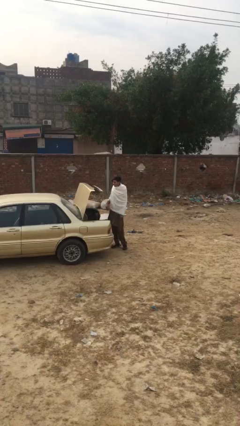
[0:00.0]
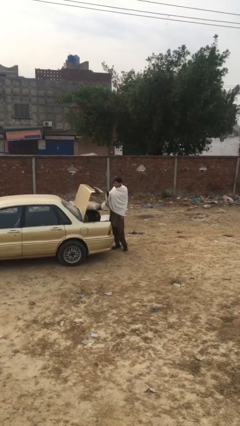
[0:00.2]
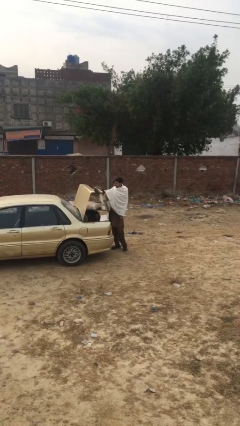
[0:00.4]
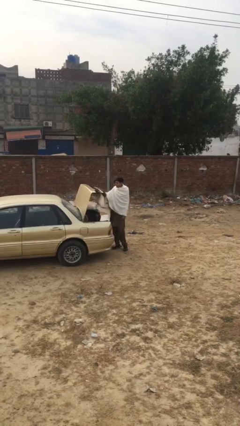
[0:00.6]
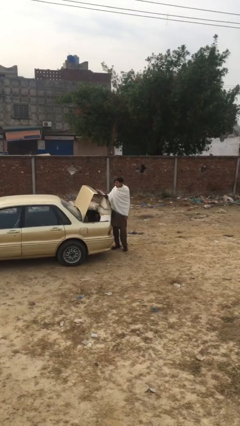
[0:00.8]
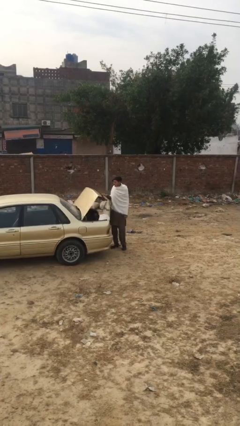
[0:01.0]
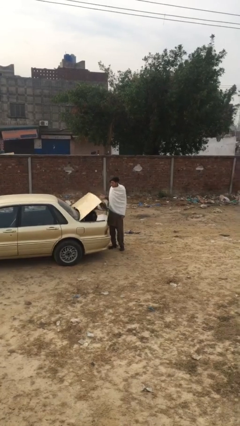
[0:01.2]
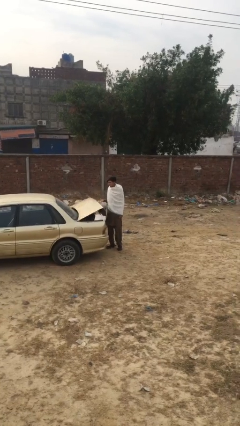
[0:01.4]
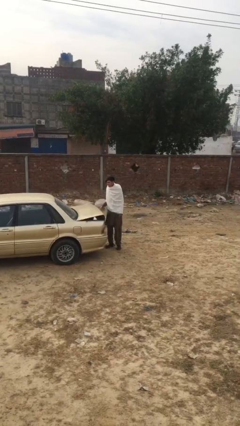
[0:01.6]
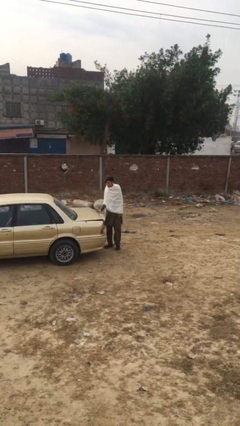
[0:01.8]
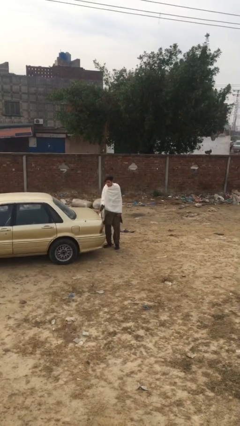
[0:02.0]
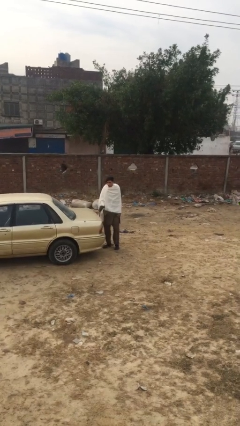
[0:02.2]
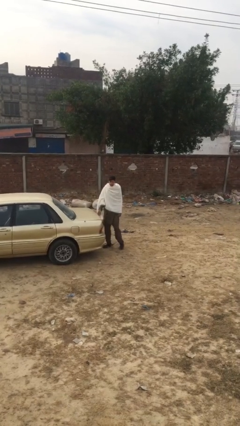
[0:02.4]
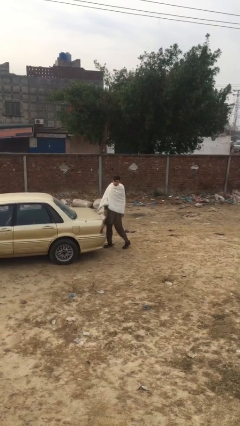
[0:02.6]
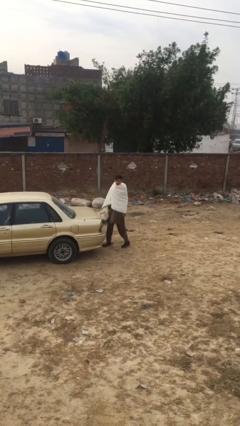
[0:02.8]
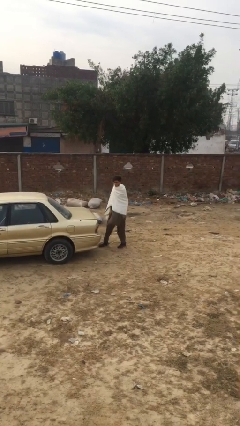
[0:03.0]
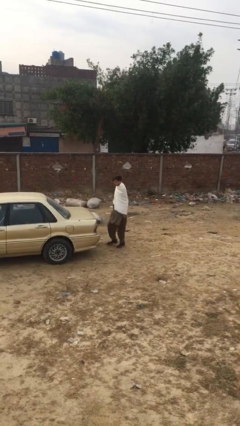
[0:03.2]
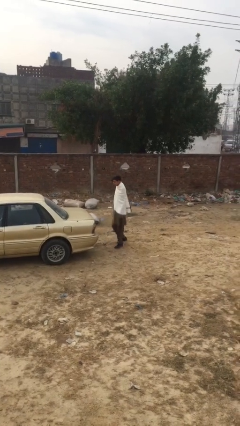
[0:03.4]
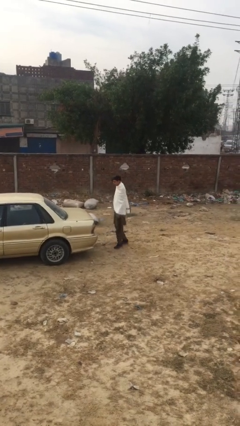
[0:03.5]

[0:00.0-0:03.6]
person closes car trunk

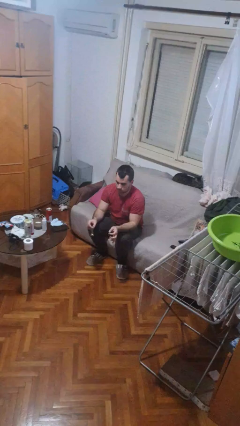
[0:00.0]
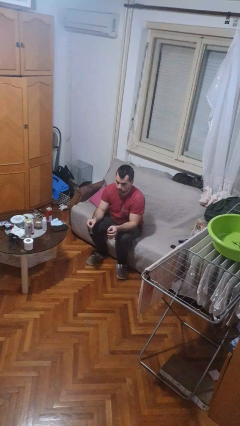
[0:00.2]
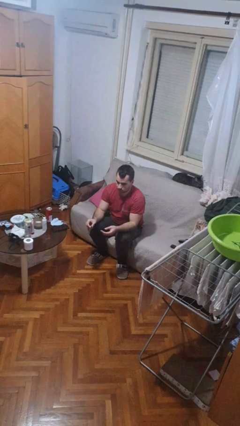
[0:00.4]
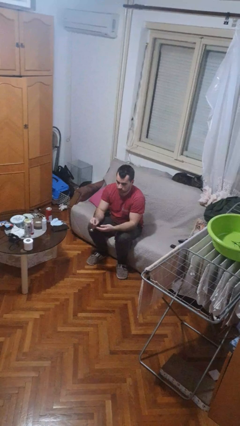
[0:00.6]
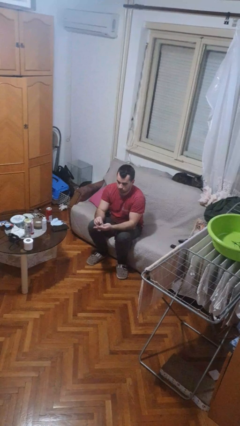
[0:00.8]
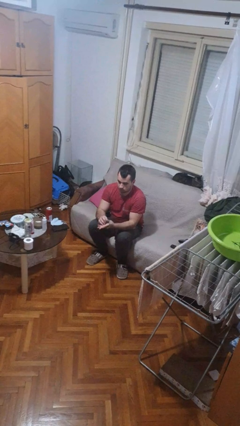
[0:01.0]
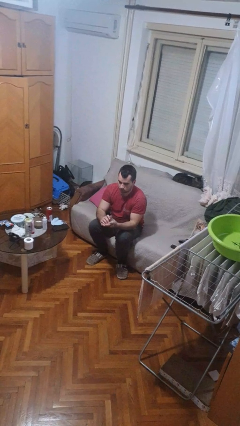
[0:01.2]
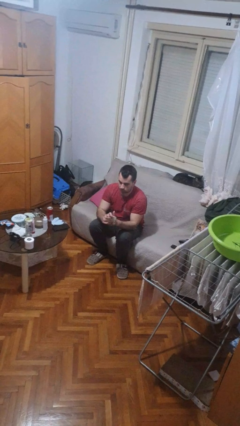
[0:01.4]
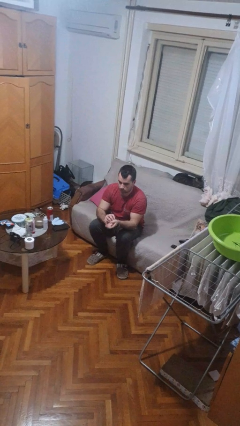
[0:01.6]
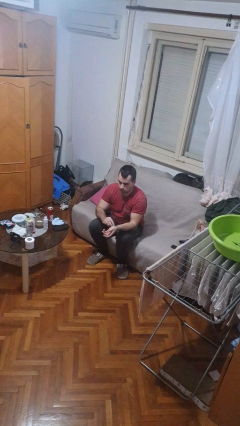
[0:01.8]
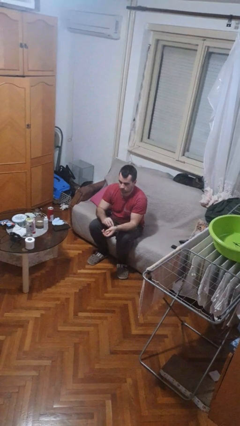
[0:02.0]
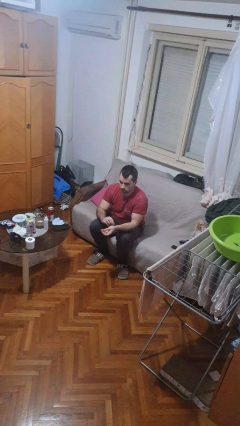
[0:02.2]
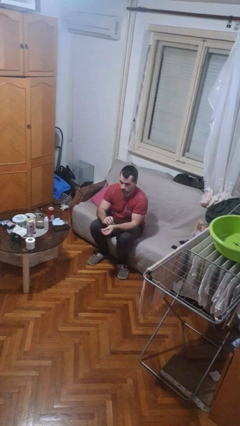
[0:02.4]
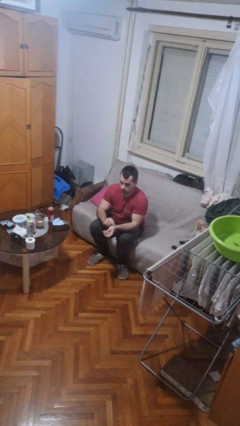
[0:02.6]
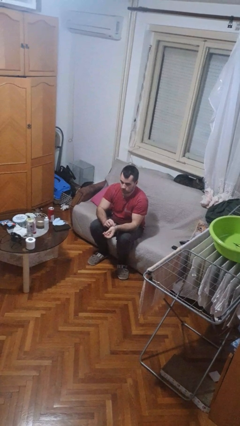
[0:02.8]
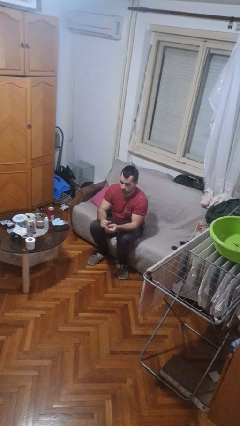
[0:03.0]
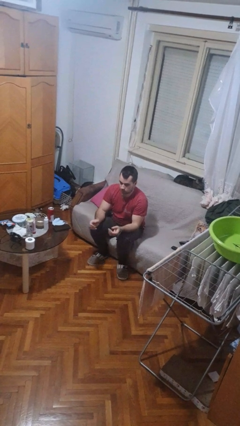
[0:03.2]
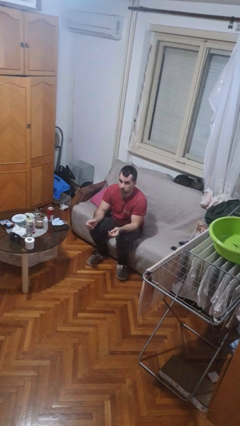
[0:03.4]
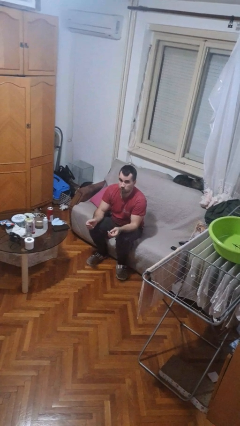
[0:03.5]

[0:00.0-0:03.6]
person puts on wristwatch

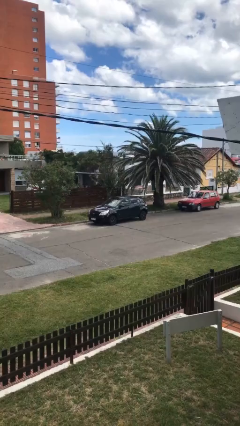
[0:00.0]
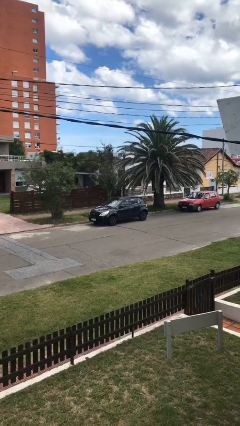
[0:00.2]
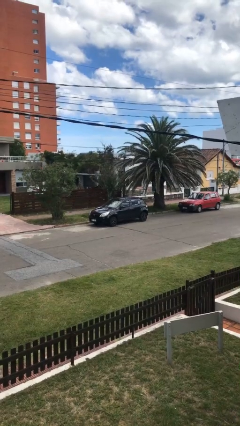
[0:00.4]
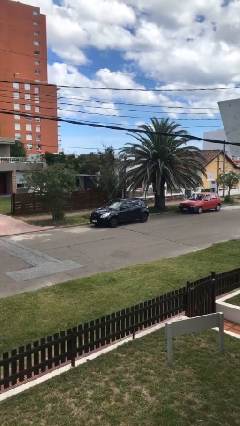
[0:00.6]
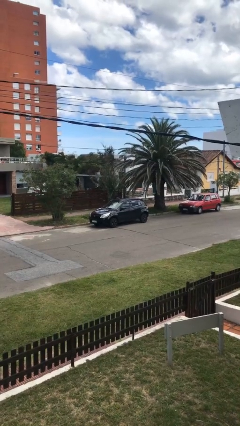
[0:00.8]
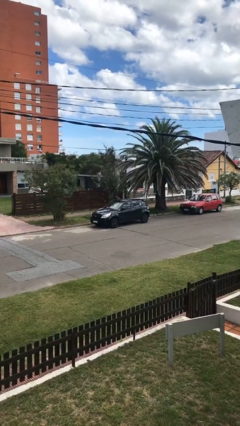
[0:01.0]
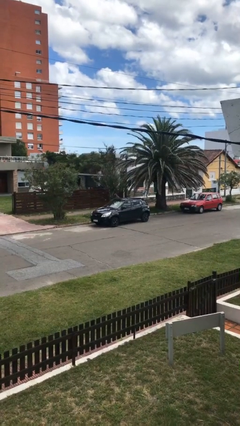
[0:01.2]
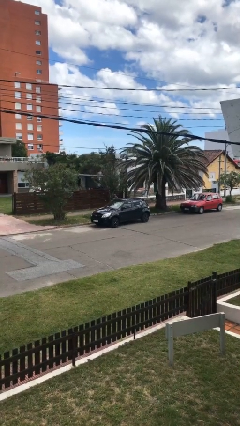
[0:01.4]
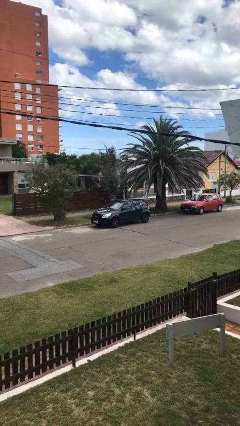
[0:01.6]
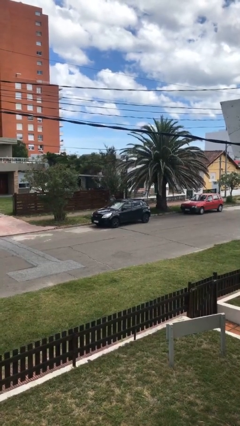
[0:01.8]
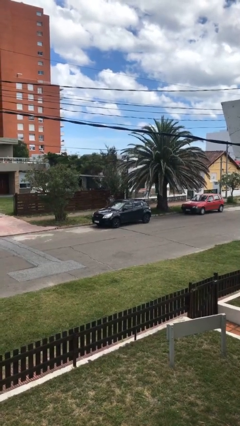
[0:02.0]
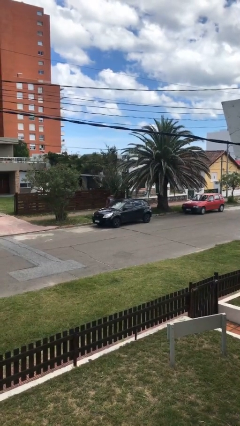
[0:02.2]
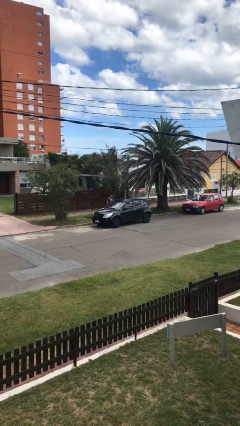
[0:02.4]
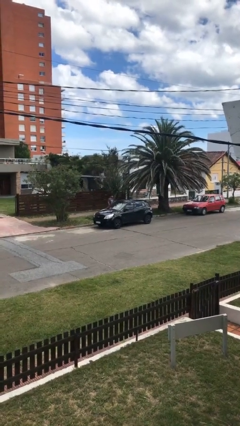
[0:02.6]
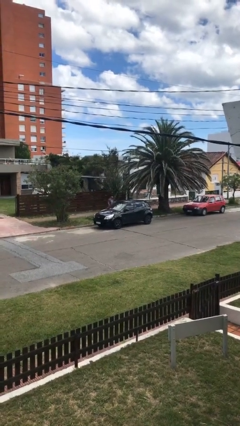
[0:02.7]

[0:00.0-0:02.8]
car drops off person

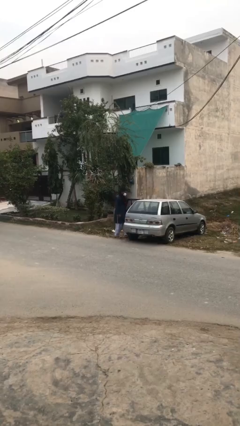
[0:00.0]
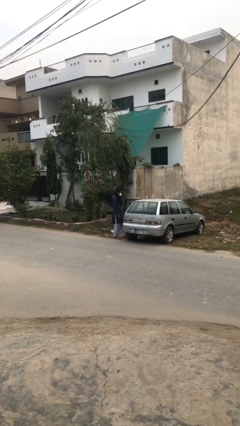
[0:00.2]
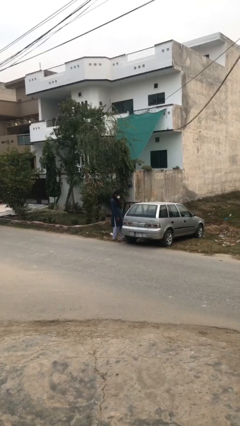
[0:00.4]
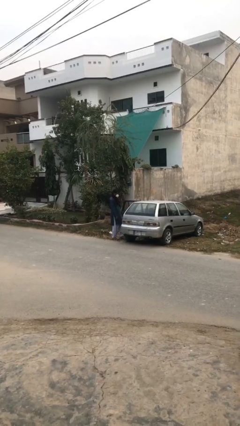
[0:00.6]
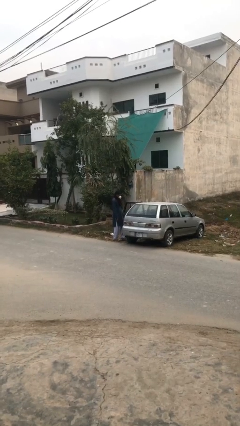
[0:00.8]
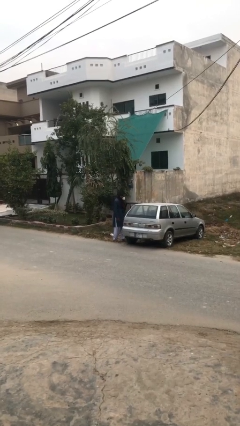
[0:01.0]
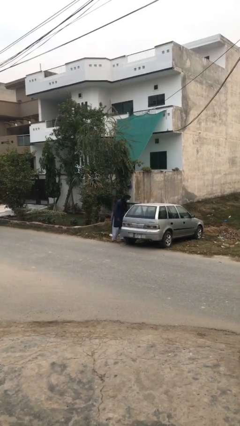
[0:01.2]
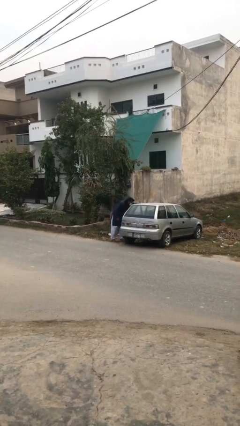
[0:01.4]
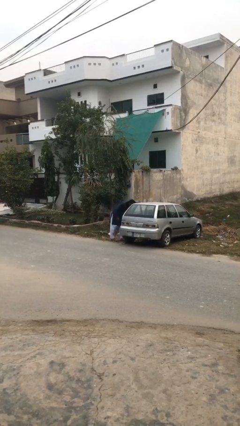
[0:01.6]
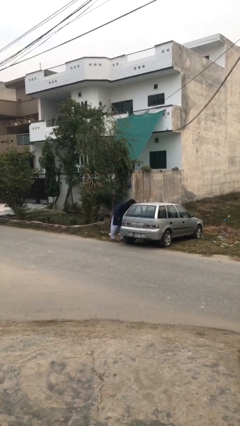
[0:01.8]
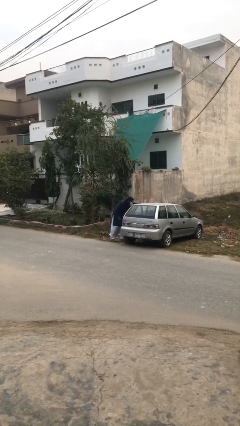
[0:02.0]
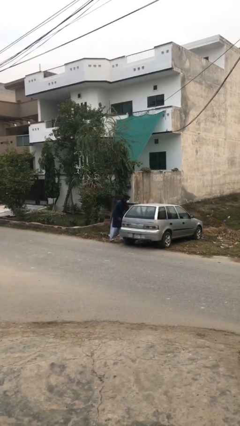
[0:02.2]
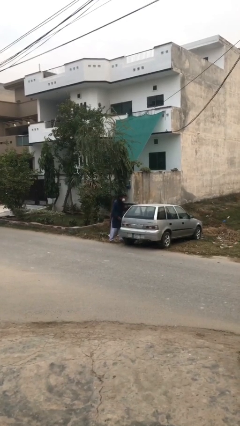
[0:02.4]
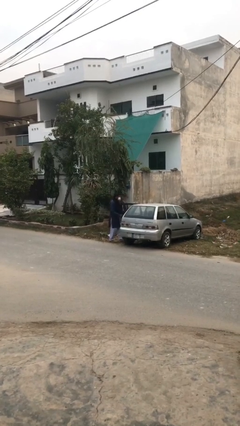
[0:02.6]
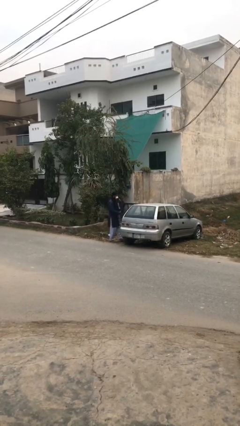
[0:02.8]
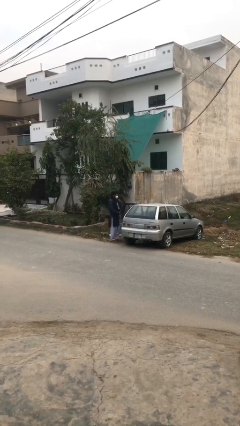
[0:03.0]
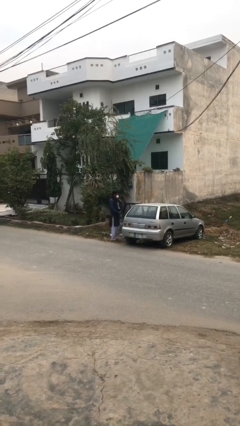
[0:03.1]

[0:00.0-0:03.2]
person unloads car

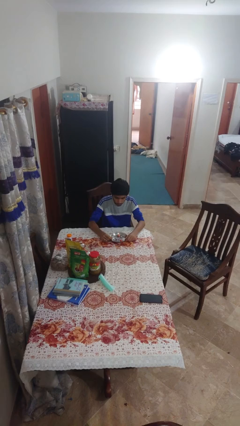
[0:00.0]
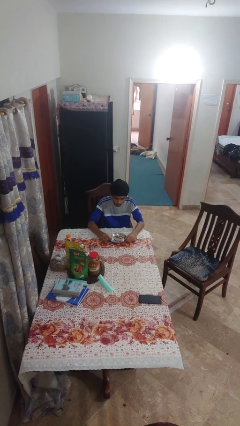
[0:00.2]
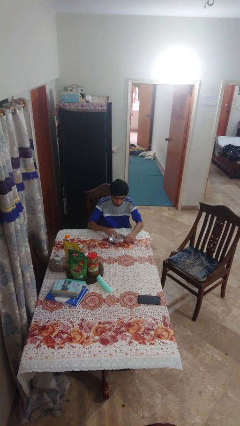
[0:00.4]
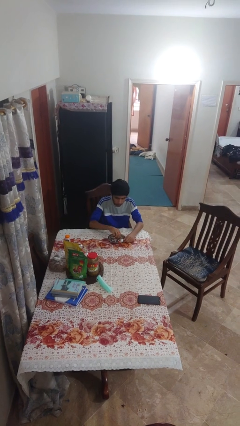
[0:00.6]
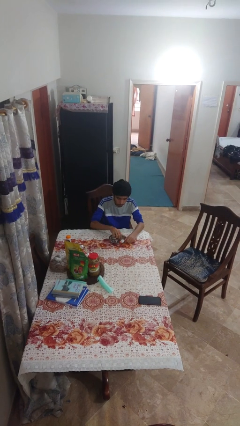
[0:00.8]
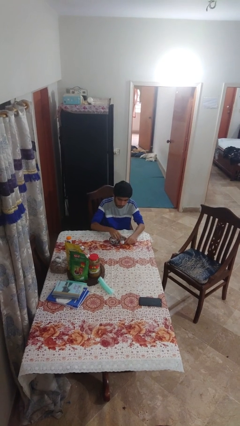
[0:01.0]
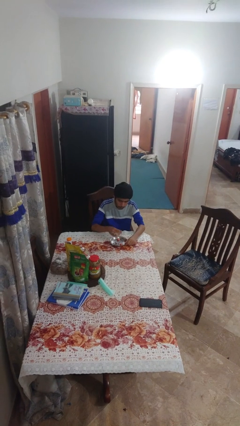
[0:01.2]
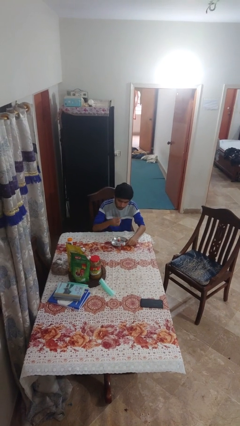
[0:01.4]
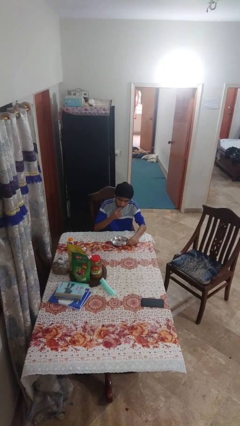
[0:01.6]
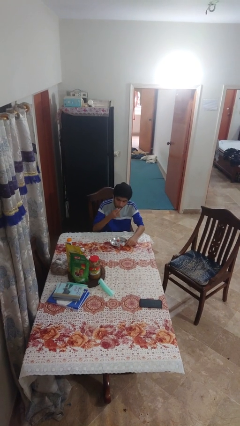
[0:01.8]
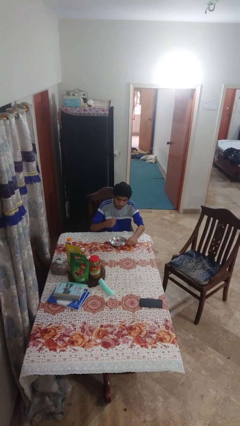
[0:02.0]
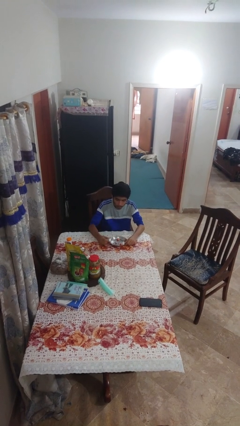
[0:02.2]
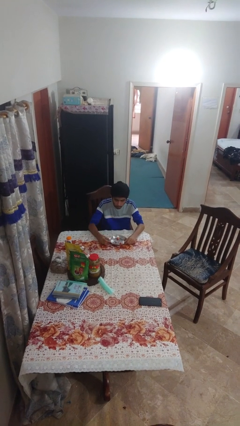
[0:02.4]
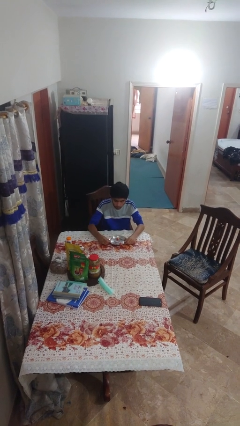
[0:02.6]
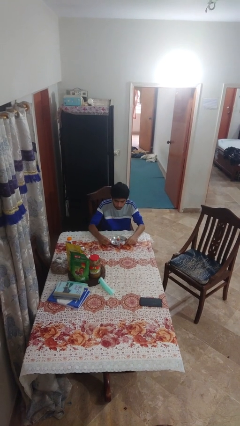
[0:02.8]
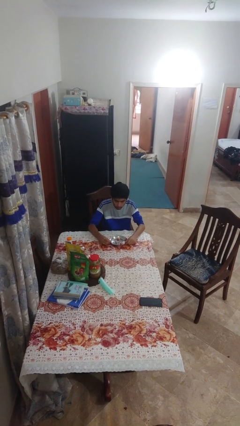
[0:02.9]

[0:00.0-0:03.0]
person eats with hands

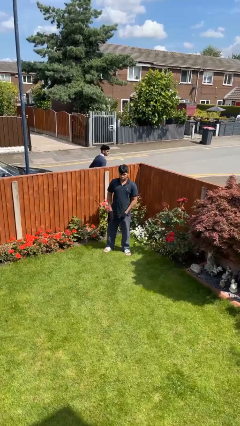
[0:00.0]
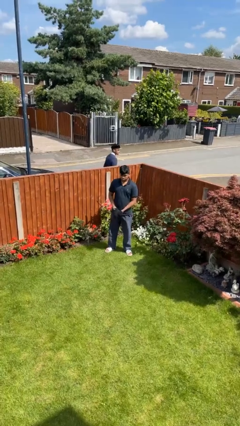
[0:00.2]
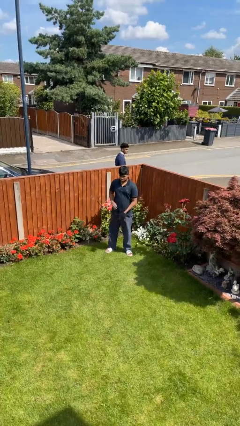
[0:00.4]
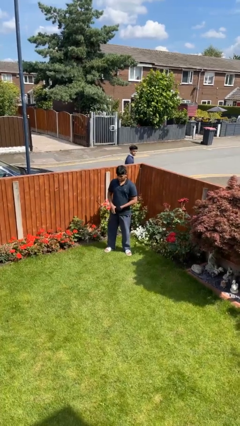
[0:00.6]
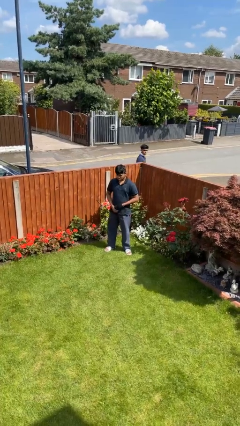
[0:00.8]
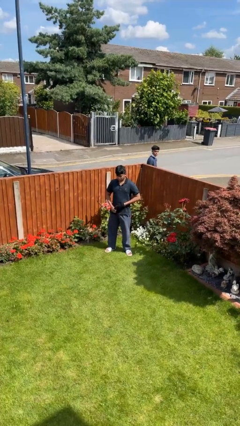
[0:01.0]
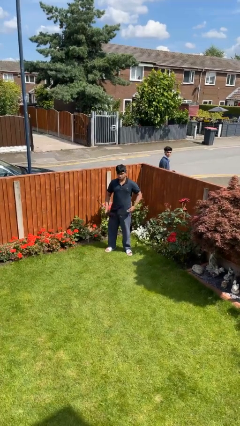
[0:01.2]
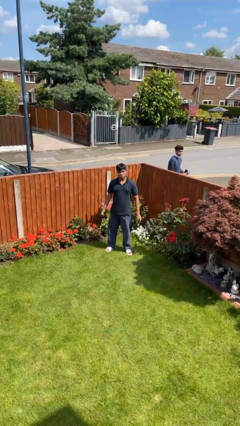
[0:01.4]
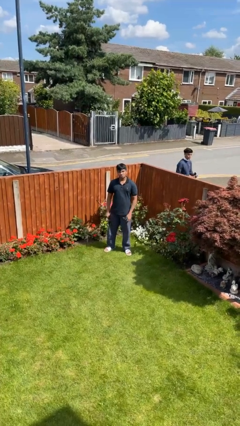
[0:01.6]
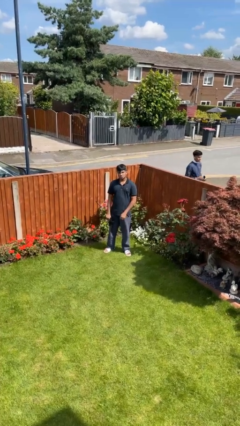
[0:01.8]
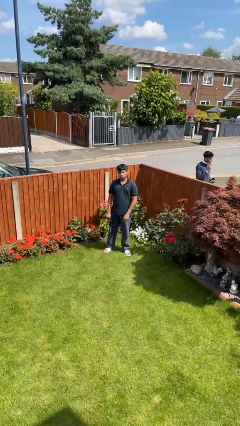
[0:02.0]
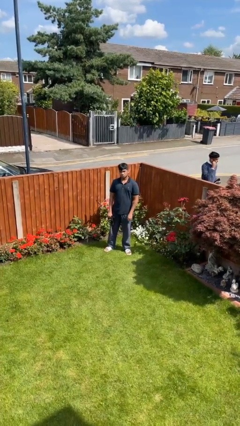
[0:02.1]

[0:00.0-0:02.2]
person takes off gloves
